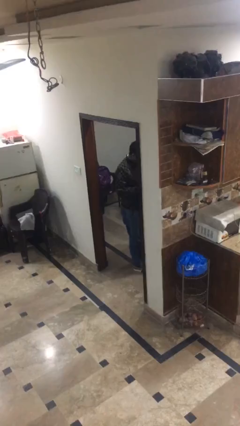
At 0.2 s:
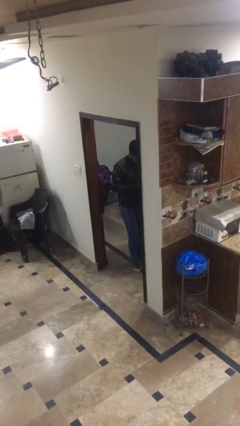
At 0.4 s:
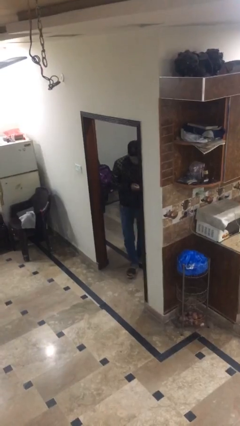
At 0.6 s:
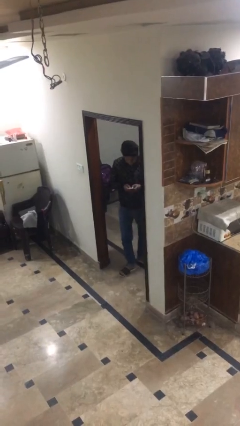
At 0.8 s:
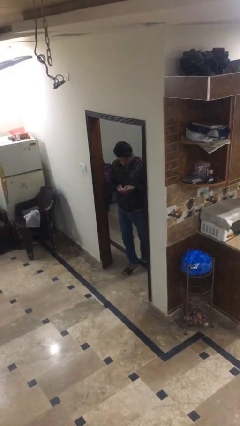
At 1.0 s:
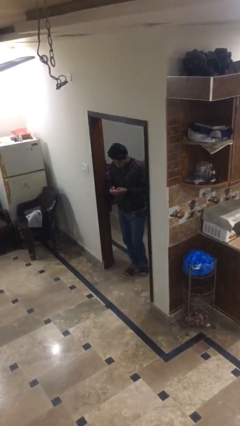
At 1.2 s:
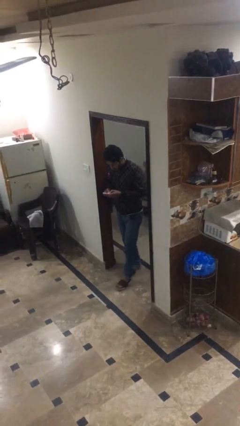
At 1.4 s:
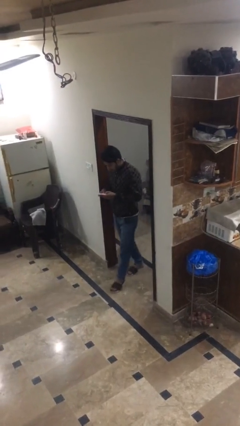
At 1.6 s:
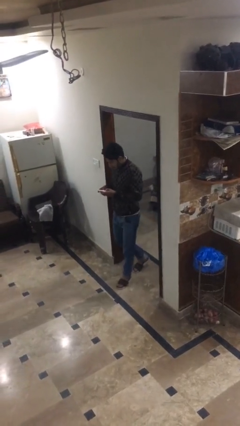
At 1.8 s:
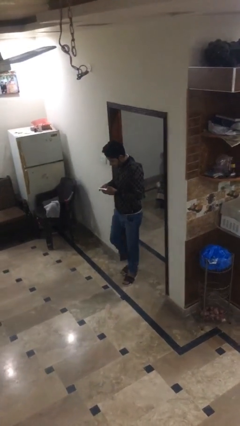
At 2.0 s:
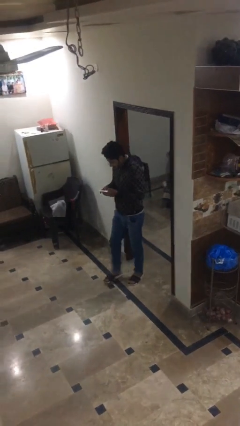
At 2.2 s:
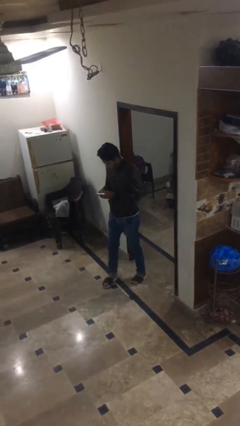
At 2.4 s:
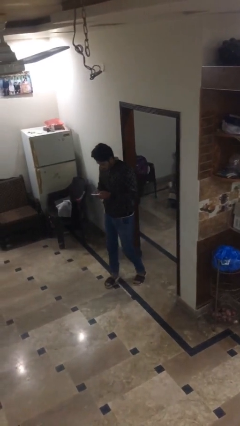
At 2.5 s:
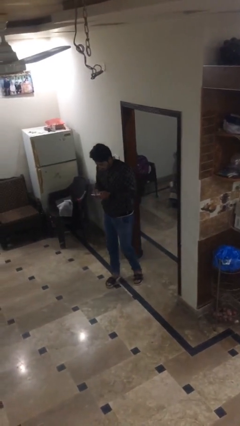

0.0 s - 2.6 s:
person exits scene through structure

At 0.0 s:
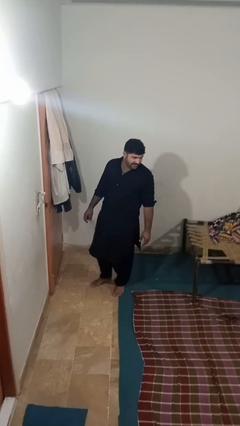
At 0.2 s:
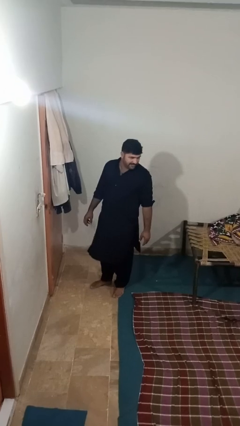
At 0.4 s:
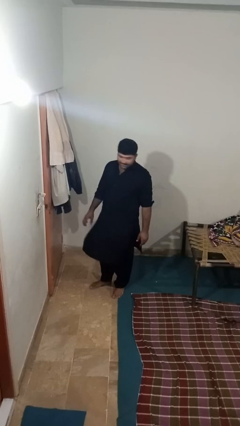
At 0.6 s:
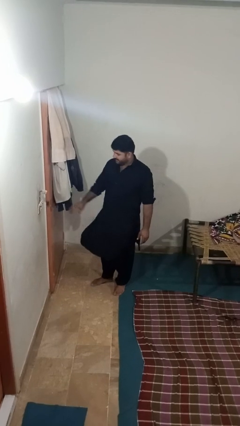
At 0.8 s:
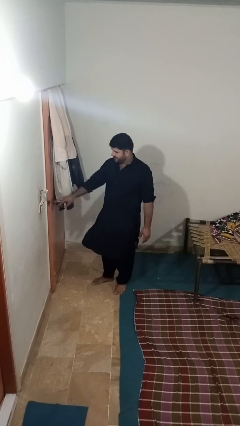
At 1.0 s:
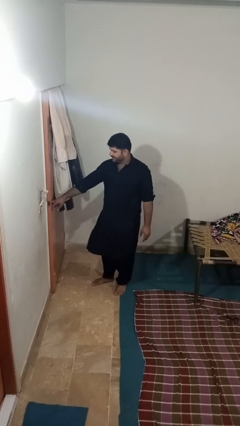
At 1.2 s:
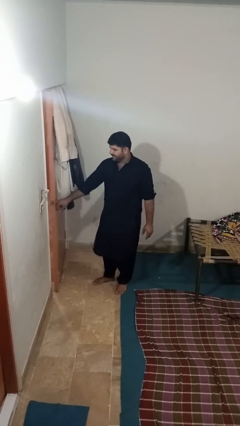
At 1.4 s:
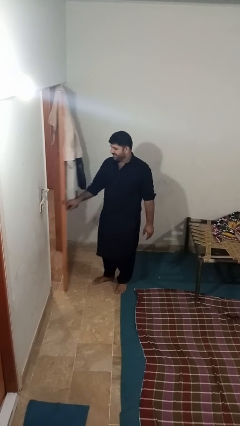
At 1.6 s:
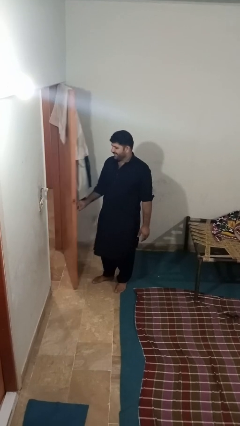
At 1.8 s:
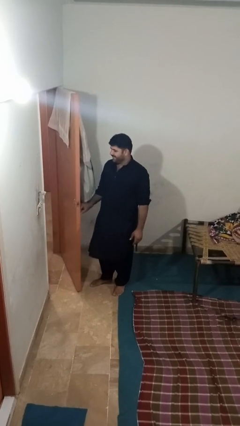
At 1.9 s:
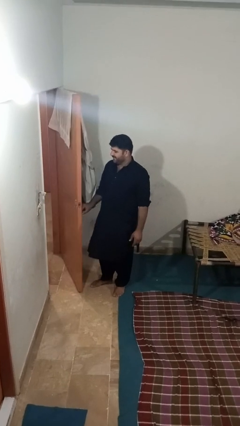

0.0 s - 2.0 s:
person opens facility door

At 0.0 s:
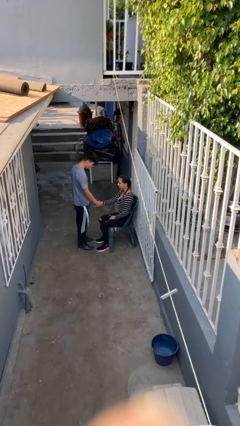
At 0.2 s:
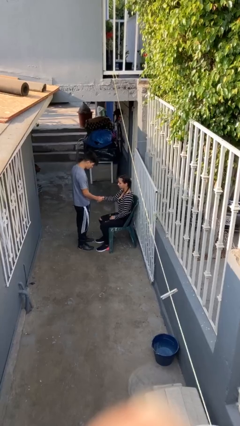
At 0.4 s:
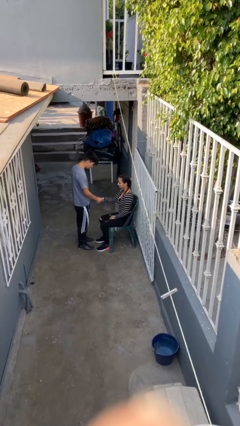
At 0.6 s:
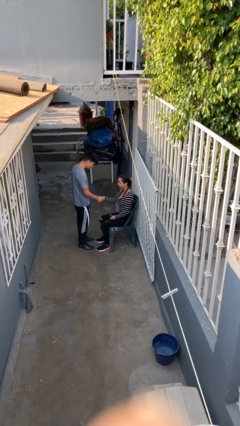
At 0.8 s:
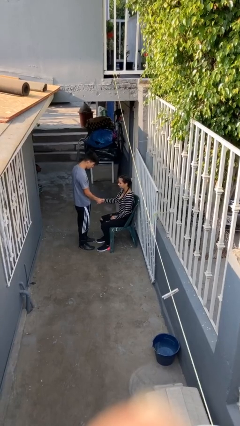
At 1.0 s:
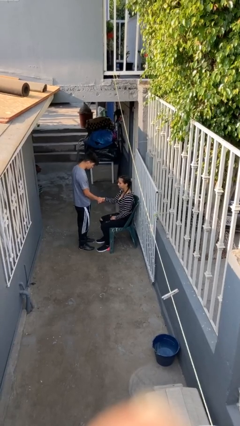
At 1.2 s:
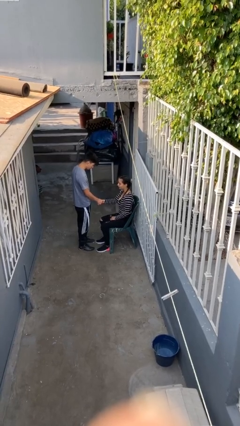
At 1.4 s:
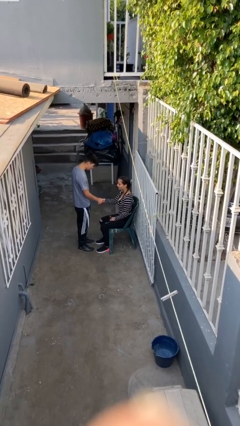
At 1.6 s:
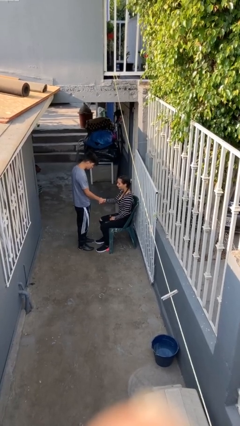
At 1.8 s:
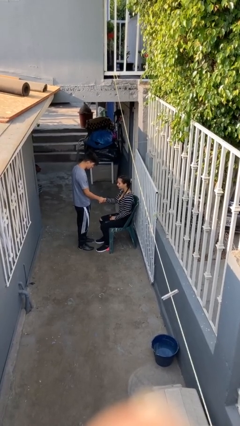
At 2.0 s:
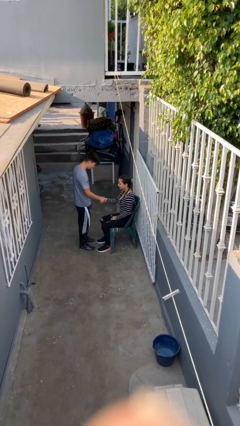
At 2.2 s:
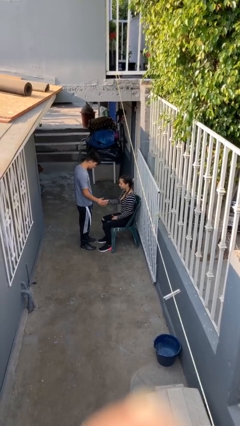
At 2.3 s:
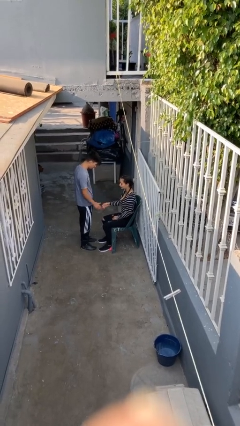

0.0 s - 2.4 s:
person shakes hand

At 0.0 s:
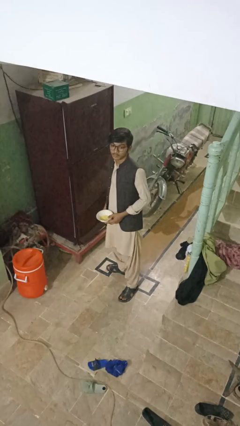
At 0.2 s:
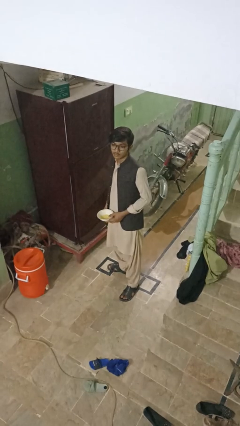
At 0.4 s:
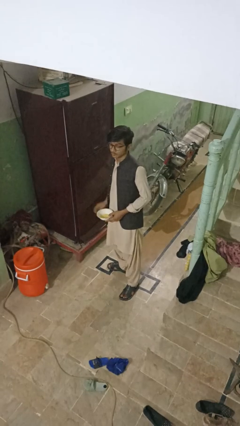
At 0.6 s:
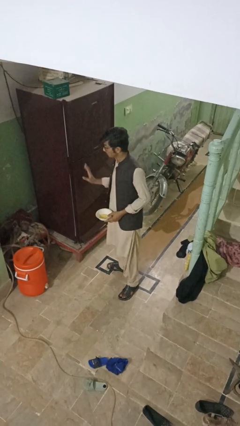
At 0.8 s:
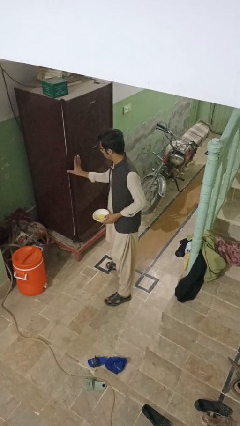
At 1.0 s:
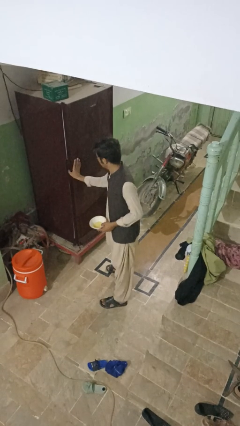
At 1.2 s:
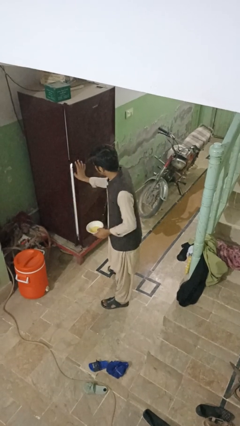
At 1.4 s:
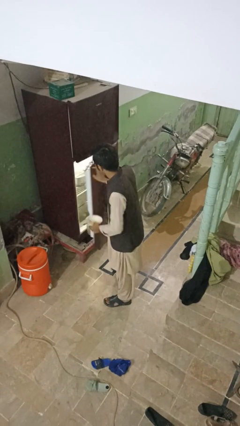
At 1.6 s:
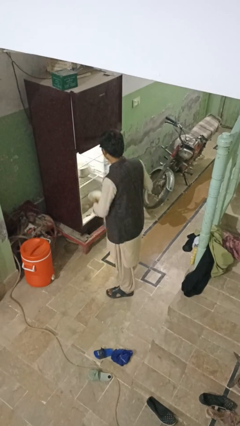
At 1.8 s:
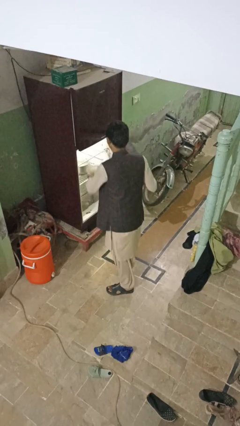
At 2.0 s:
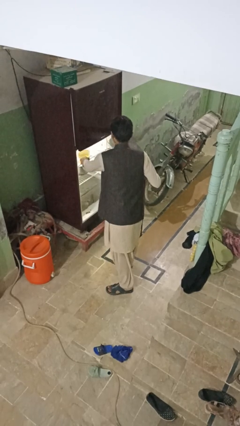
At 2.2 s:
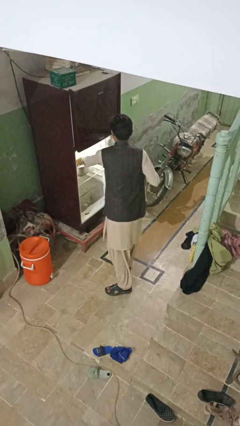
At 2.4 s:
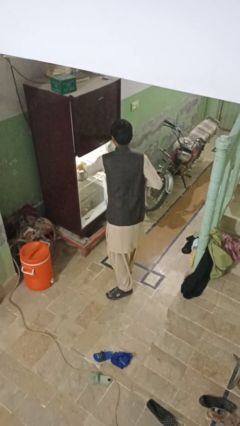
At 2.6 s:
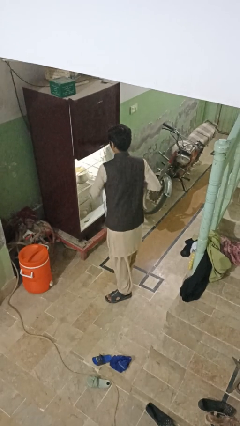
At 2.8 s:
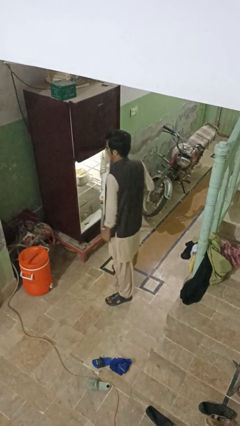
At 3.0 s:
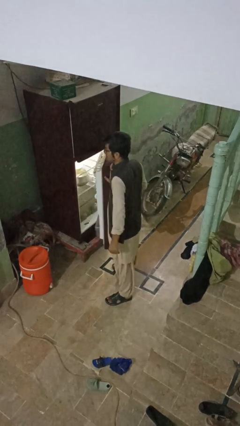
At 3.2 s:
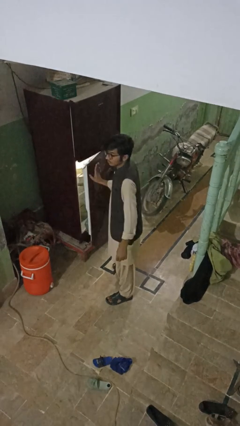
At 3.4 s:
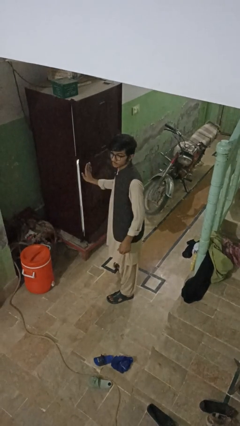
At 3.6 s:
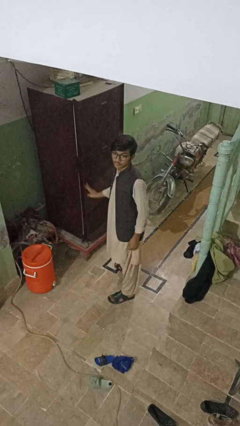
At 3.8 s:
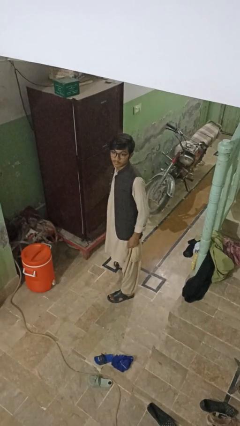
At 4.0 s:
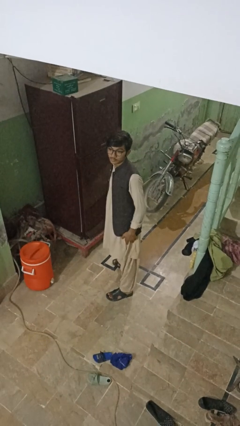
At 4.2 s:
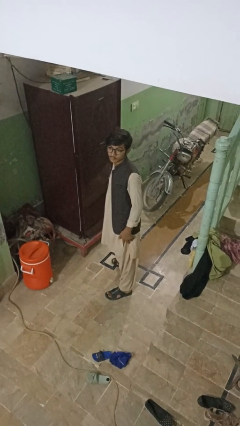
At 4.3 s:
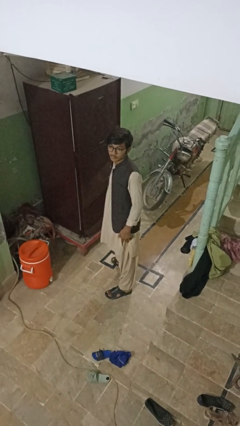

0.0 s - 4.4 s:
person puts object into refrigerator

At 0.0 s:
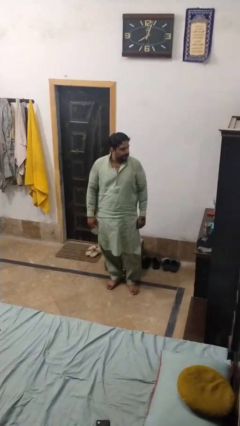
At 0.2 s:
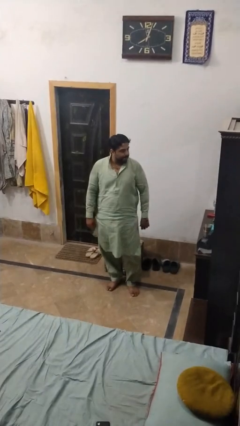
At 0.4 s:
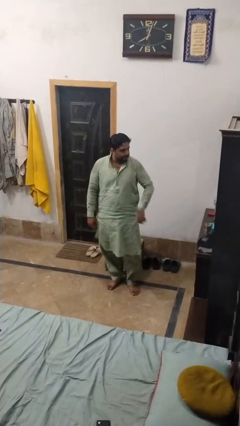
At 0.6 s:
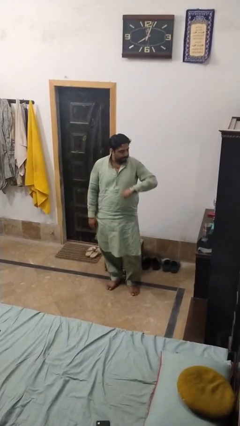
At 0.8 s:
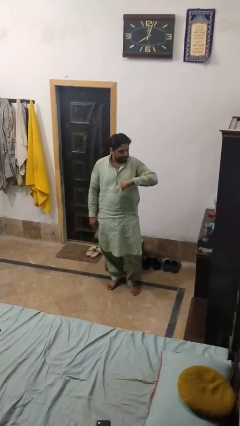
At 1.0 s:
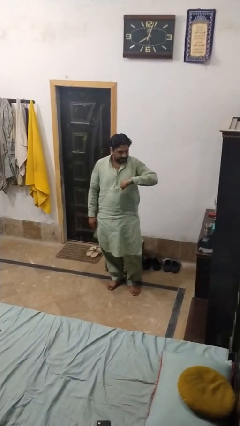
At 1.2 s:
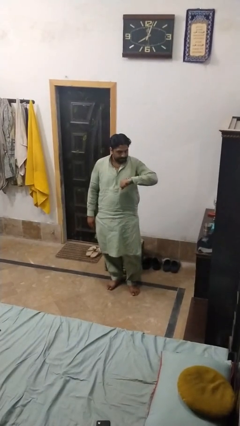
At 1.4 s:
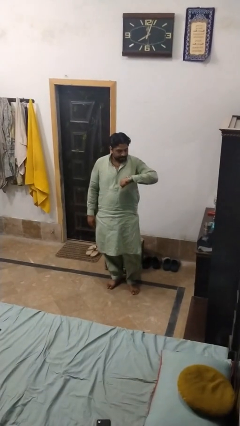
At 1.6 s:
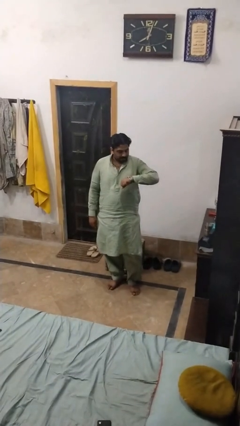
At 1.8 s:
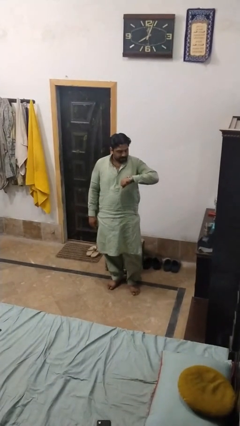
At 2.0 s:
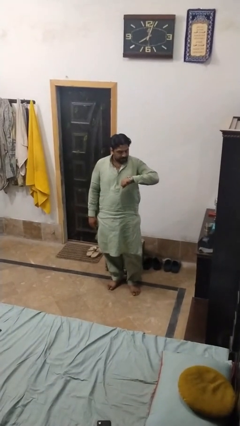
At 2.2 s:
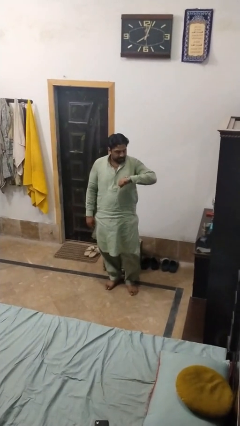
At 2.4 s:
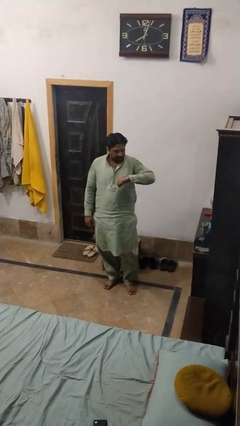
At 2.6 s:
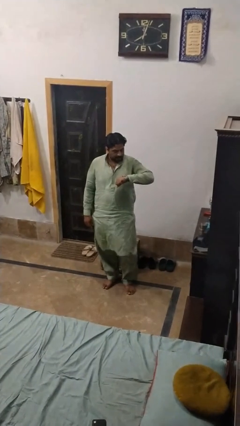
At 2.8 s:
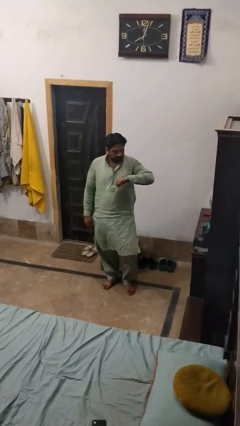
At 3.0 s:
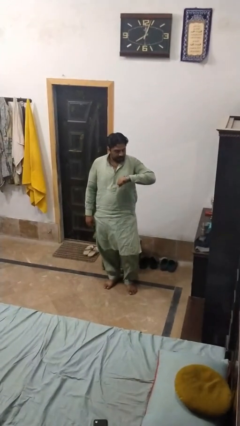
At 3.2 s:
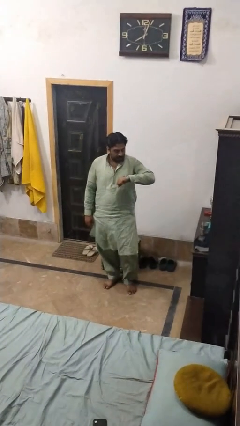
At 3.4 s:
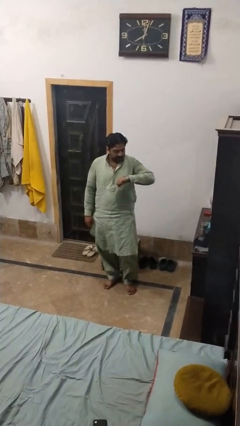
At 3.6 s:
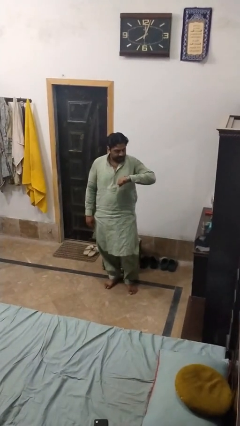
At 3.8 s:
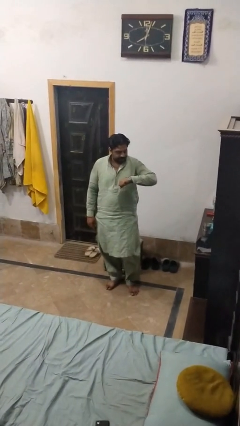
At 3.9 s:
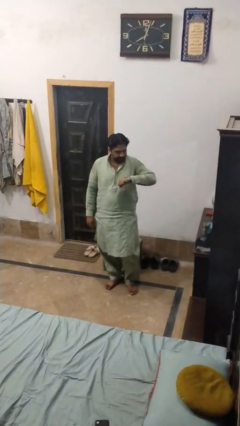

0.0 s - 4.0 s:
person looks at wristwatch

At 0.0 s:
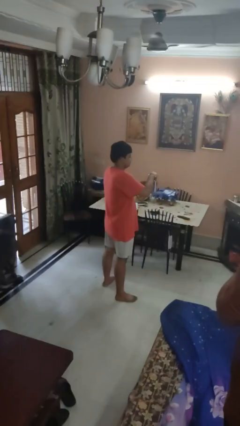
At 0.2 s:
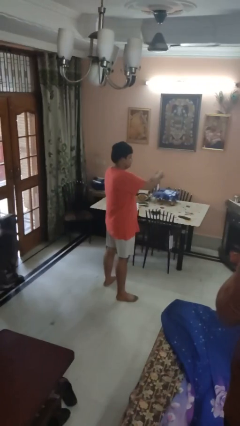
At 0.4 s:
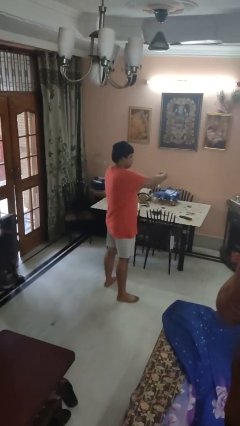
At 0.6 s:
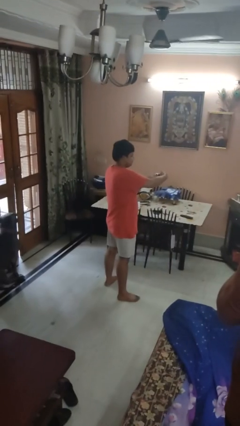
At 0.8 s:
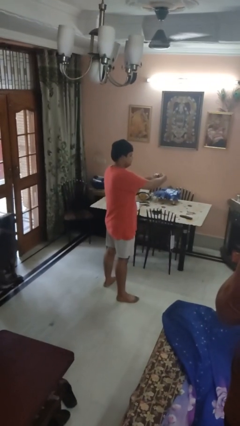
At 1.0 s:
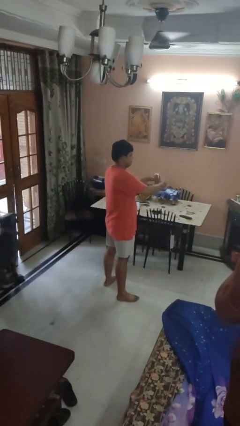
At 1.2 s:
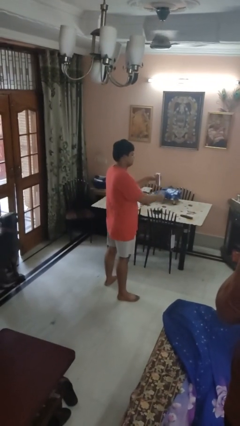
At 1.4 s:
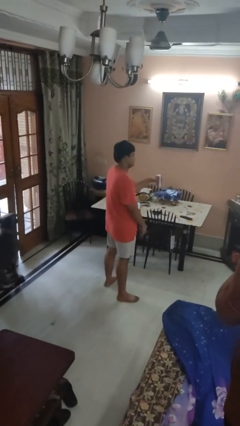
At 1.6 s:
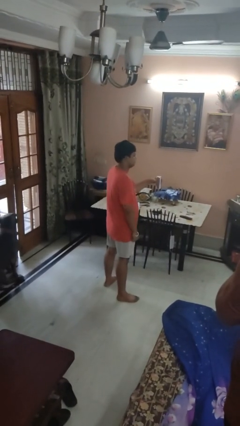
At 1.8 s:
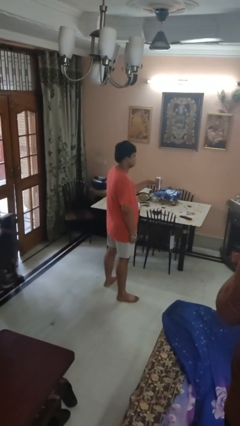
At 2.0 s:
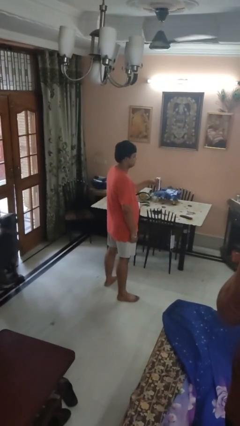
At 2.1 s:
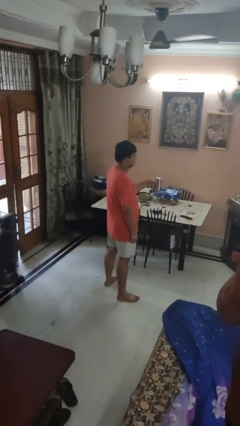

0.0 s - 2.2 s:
person opens beverage can
